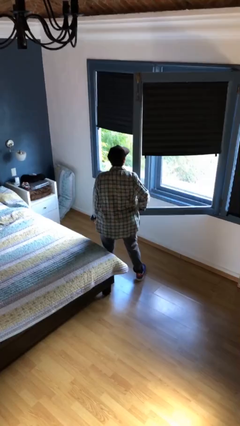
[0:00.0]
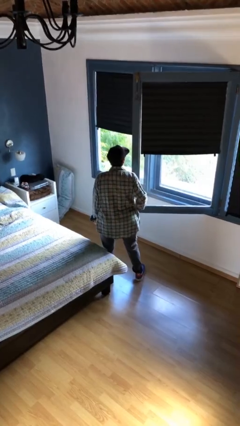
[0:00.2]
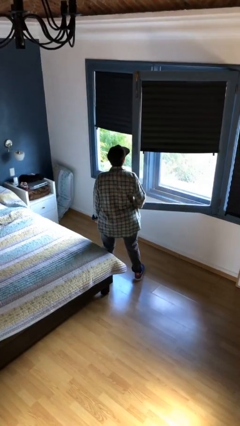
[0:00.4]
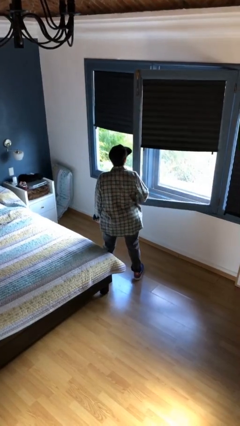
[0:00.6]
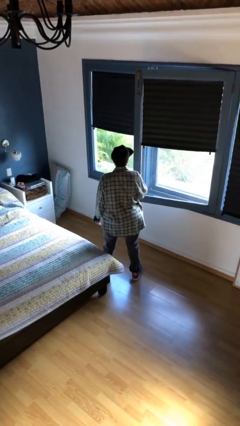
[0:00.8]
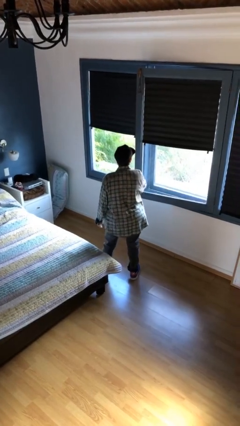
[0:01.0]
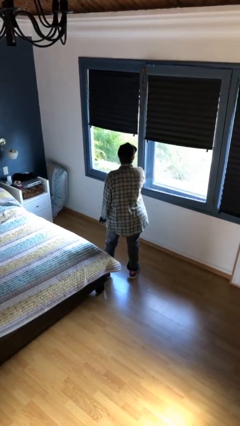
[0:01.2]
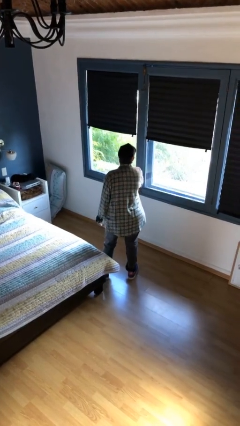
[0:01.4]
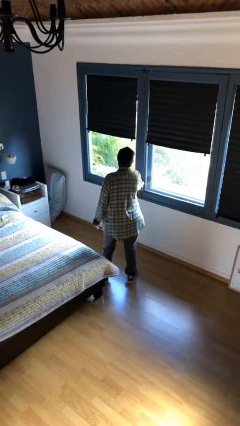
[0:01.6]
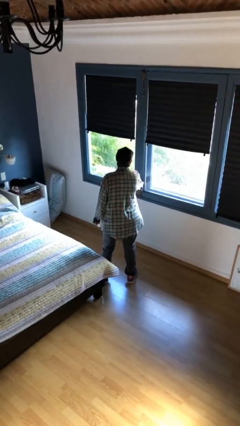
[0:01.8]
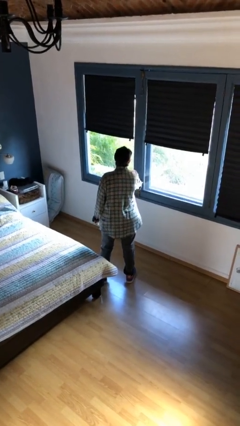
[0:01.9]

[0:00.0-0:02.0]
person closes home window

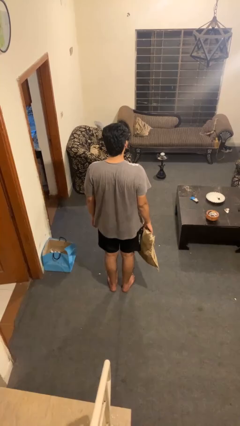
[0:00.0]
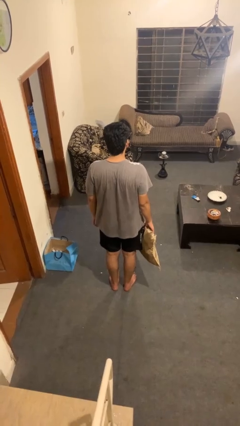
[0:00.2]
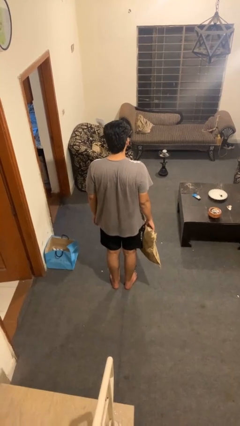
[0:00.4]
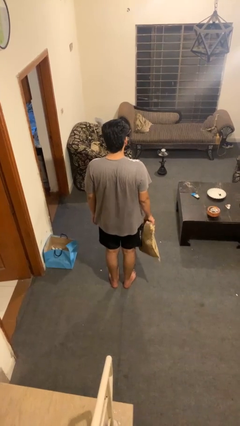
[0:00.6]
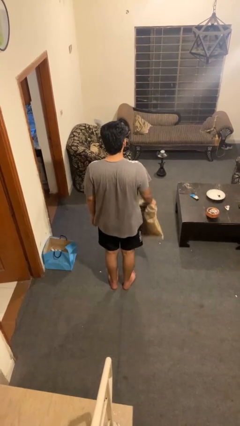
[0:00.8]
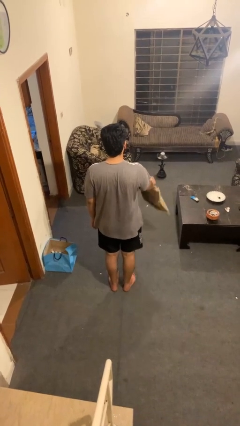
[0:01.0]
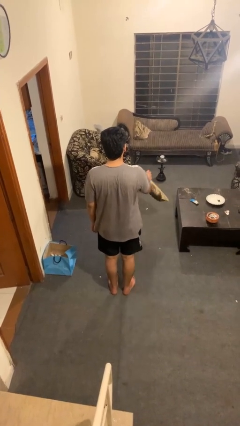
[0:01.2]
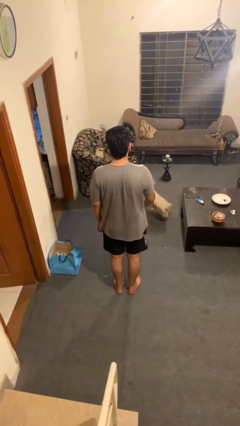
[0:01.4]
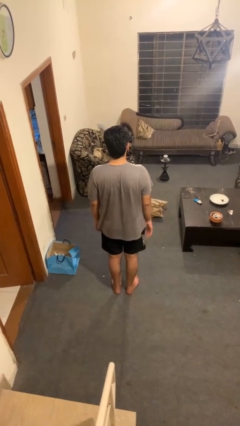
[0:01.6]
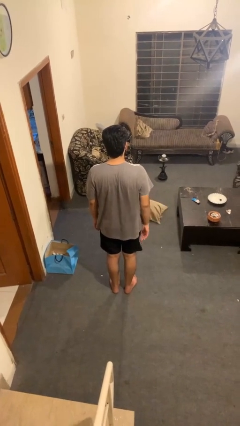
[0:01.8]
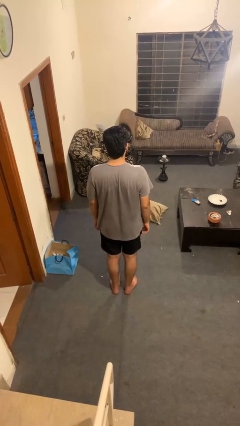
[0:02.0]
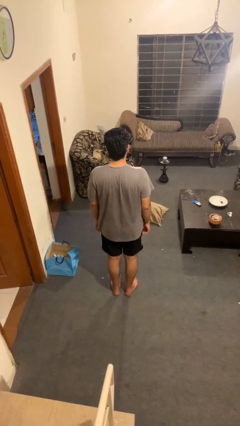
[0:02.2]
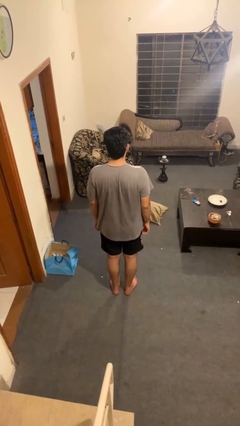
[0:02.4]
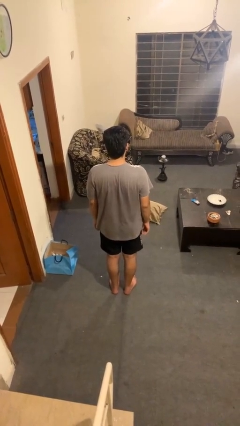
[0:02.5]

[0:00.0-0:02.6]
person throws object into air

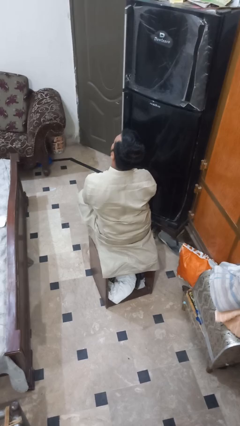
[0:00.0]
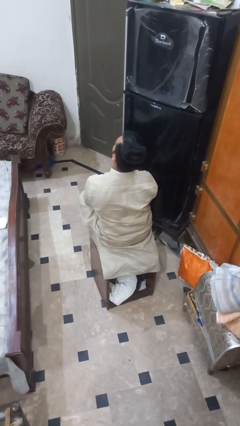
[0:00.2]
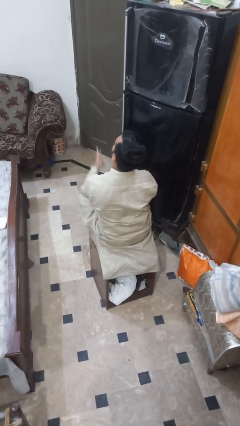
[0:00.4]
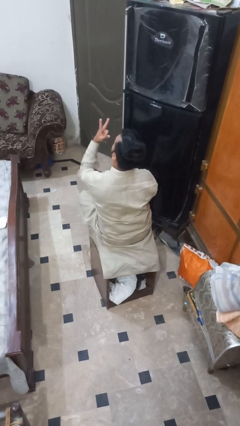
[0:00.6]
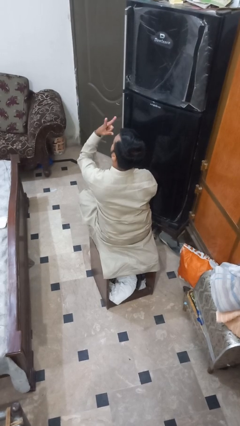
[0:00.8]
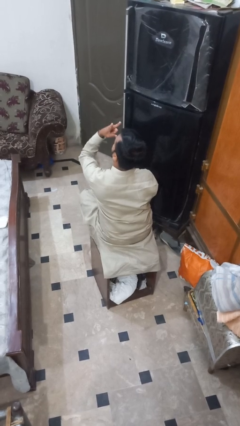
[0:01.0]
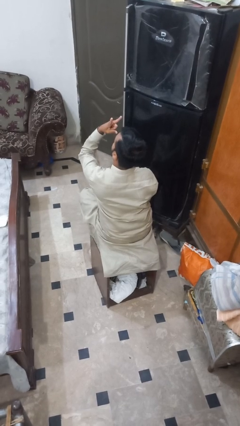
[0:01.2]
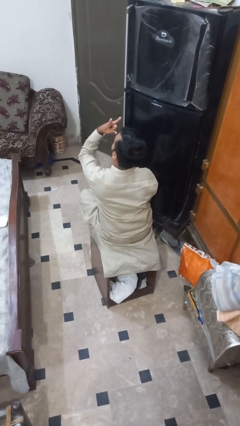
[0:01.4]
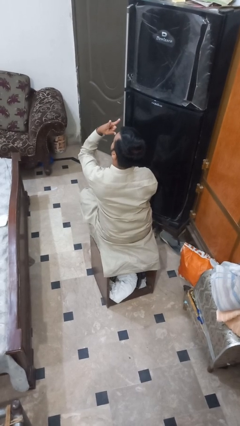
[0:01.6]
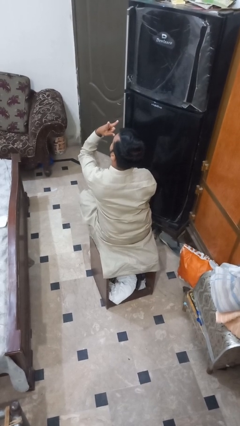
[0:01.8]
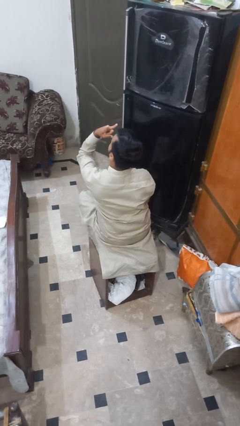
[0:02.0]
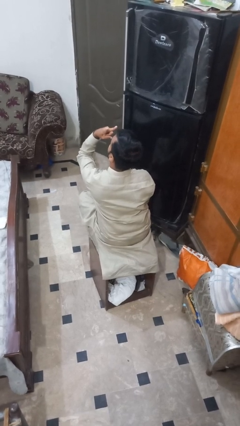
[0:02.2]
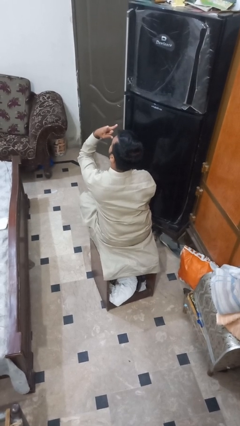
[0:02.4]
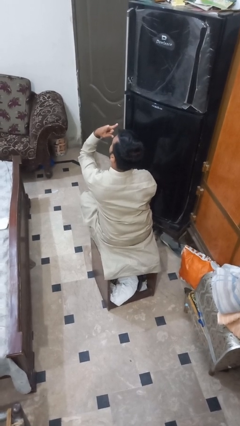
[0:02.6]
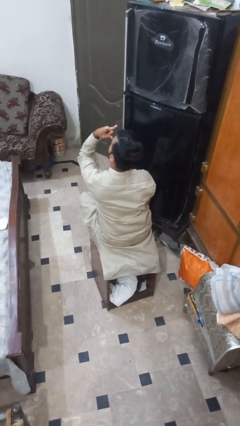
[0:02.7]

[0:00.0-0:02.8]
person gestures watch closely

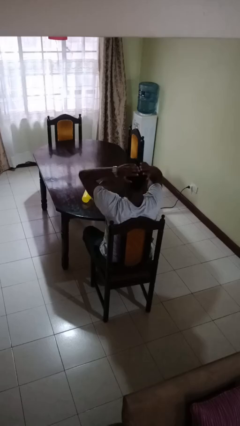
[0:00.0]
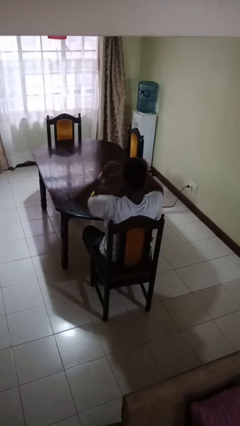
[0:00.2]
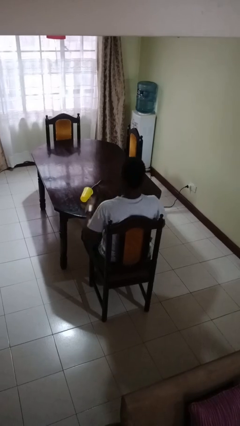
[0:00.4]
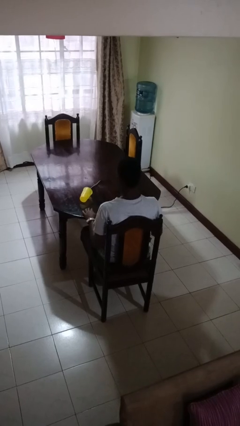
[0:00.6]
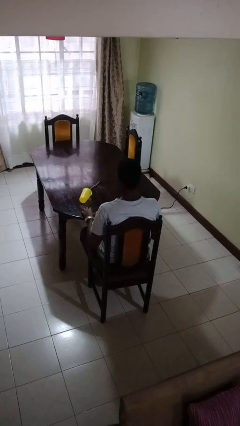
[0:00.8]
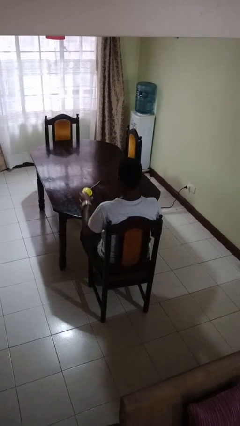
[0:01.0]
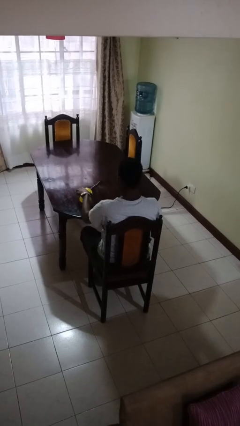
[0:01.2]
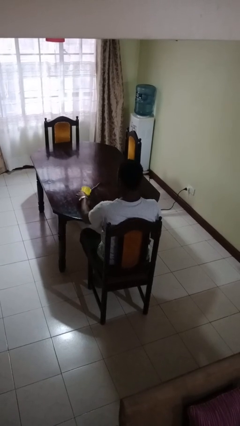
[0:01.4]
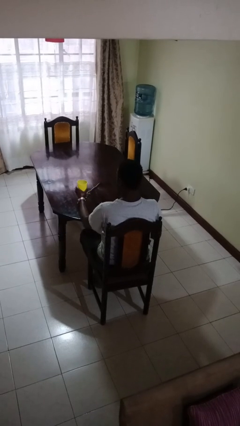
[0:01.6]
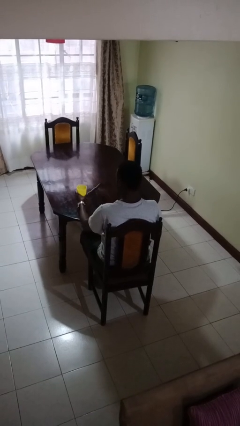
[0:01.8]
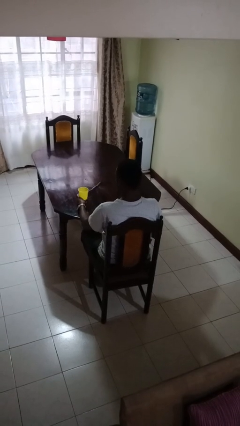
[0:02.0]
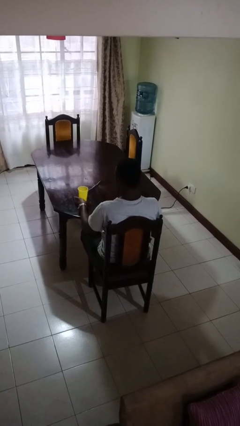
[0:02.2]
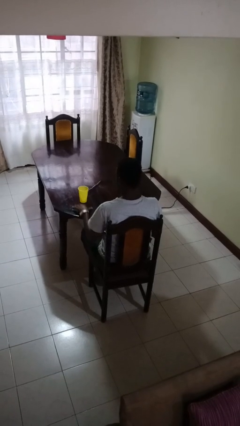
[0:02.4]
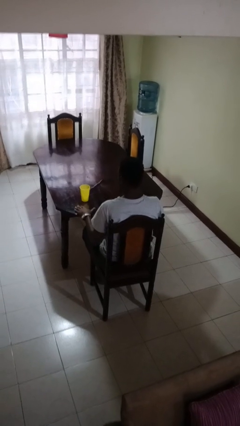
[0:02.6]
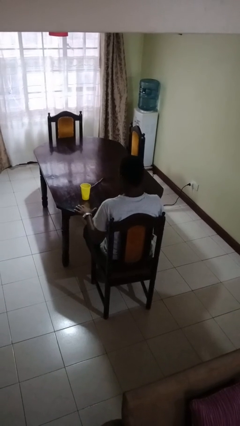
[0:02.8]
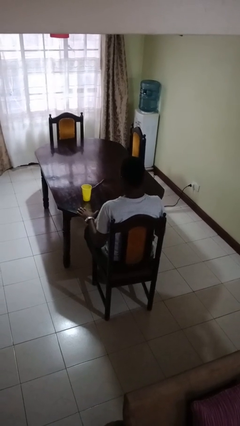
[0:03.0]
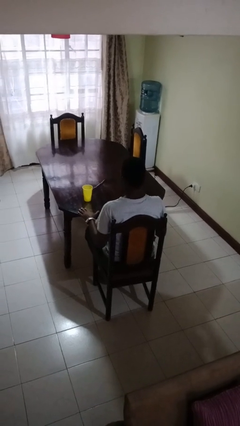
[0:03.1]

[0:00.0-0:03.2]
person sets upright glass

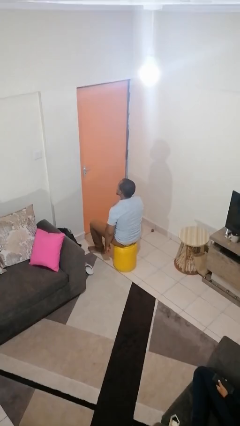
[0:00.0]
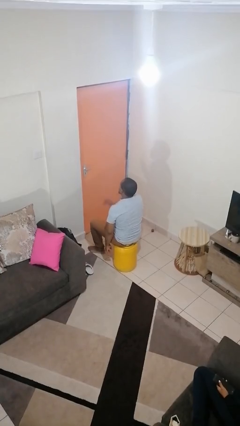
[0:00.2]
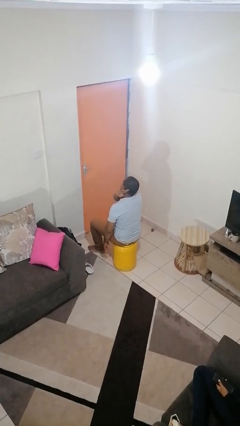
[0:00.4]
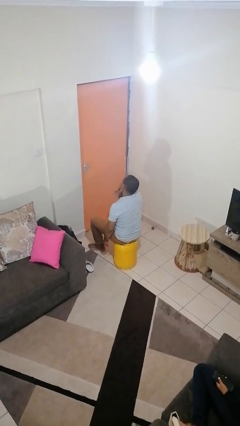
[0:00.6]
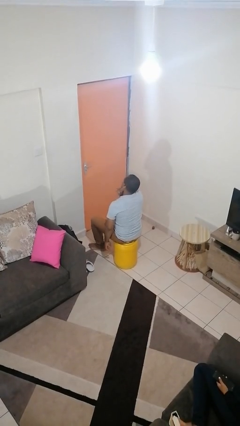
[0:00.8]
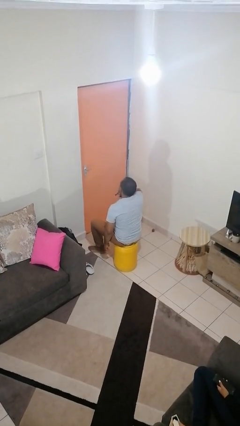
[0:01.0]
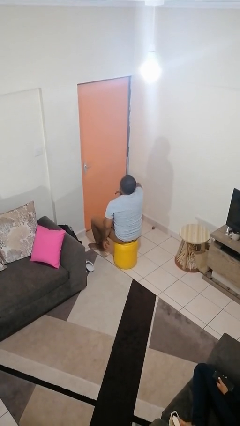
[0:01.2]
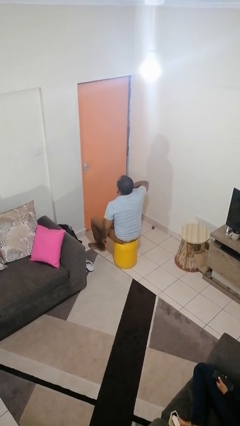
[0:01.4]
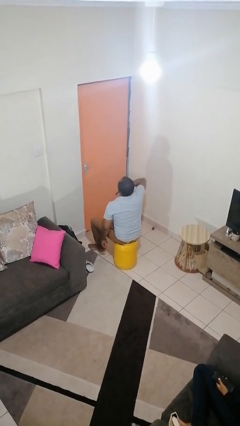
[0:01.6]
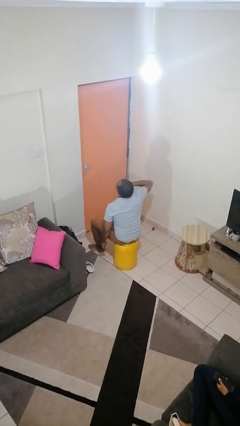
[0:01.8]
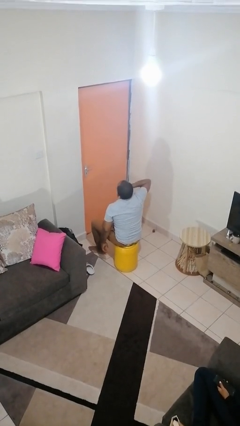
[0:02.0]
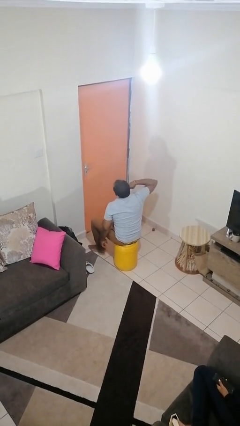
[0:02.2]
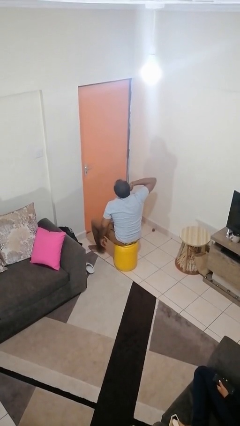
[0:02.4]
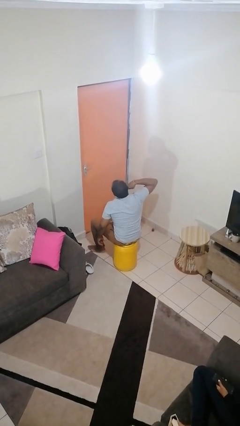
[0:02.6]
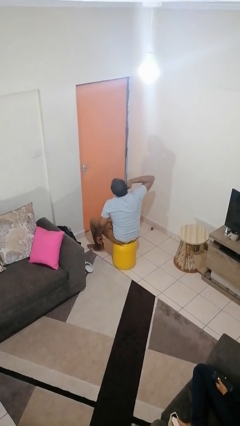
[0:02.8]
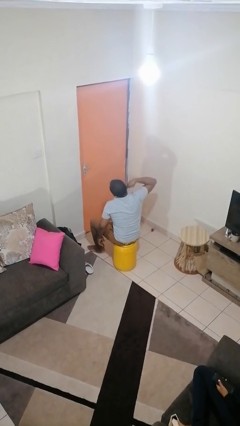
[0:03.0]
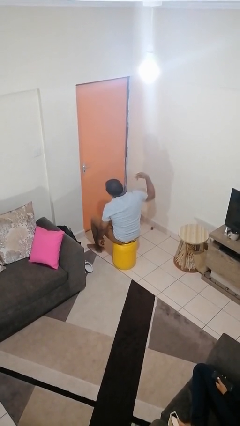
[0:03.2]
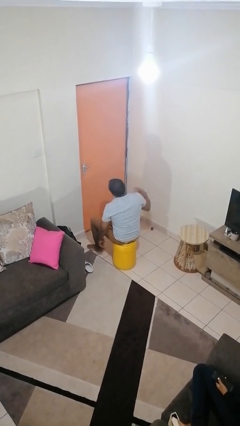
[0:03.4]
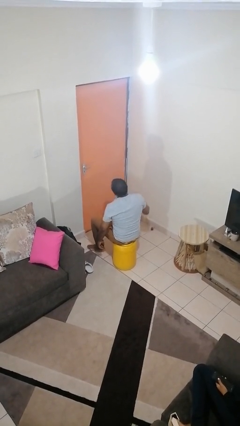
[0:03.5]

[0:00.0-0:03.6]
person gestures cut

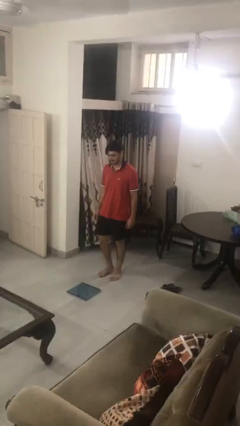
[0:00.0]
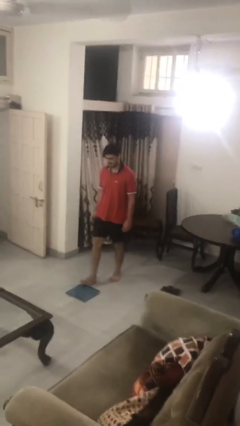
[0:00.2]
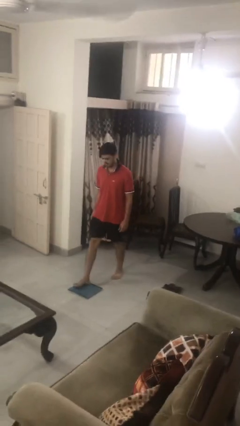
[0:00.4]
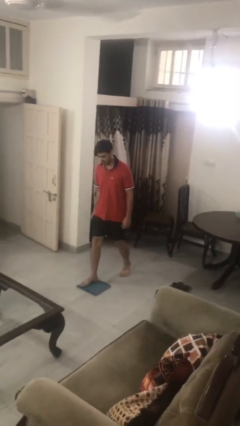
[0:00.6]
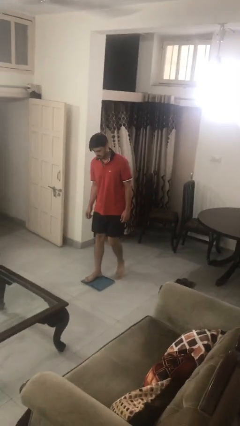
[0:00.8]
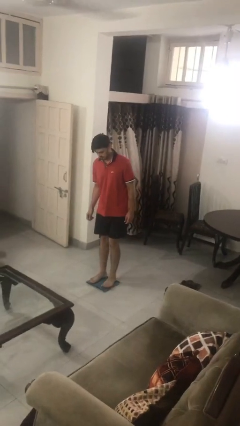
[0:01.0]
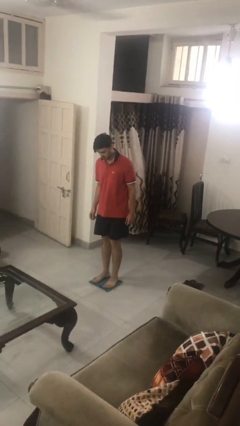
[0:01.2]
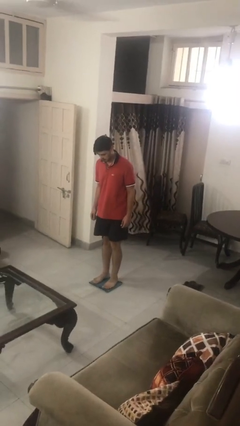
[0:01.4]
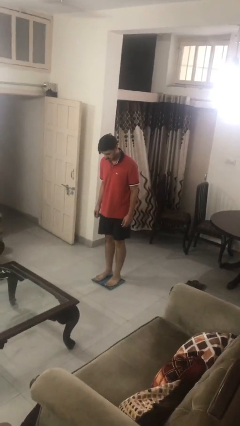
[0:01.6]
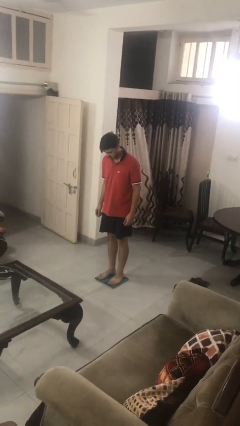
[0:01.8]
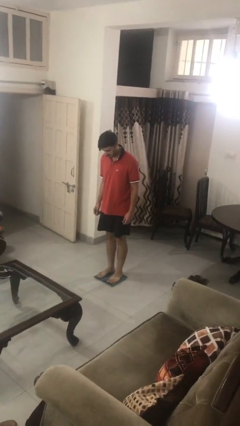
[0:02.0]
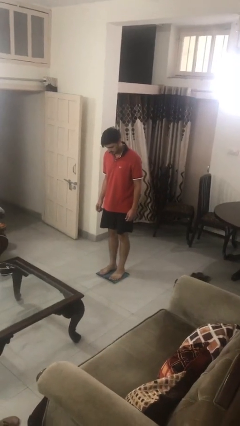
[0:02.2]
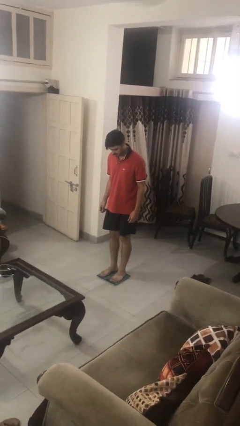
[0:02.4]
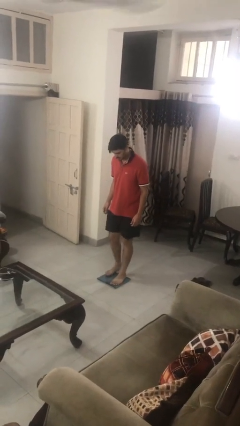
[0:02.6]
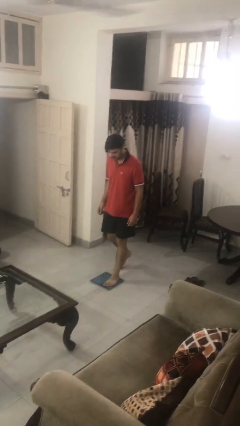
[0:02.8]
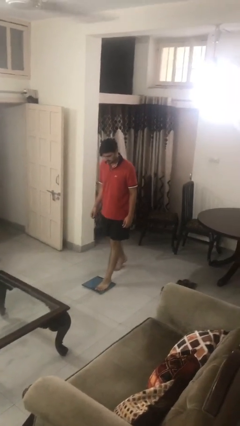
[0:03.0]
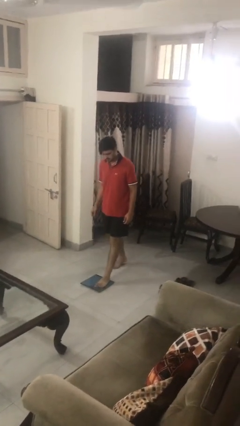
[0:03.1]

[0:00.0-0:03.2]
person uses bodyweight scale
